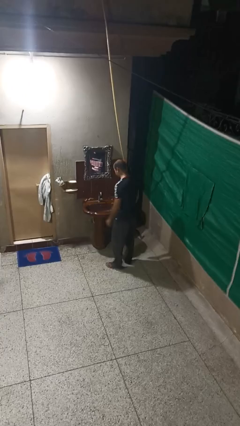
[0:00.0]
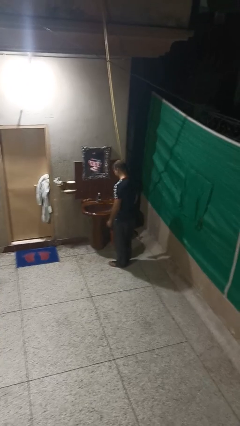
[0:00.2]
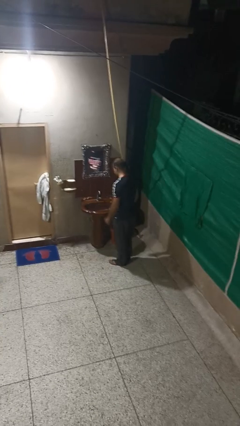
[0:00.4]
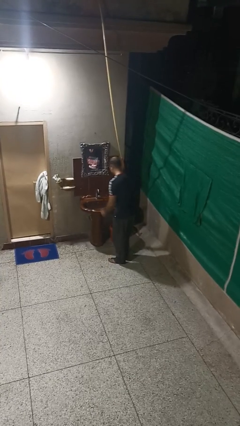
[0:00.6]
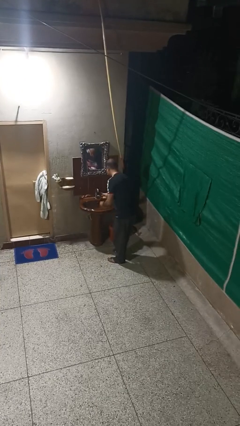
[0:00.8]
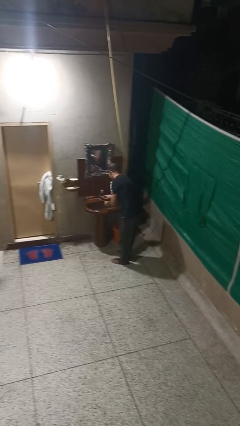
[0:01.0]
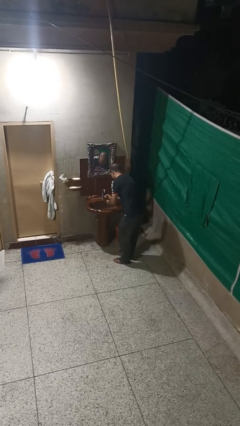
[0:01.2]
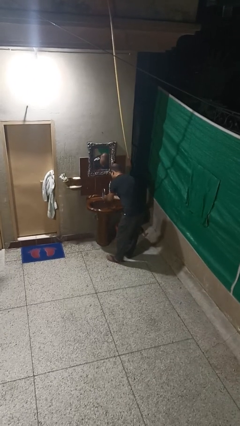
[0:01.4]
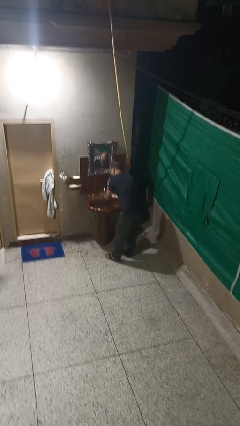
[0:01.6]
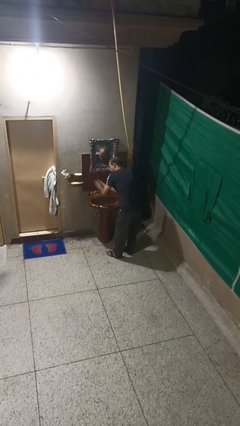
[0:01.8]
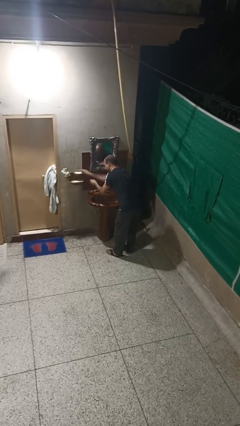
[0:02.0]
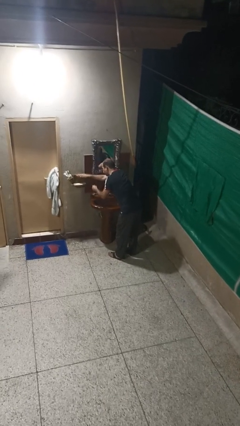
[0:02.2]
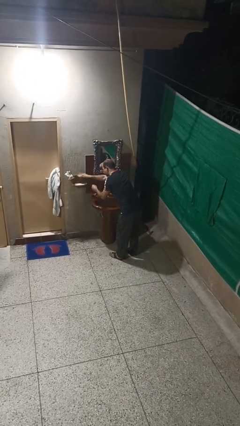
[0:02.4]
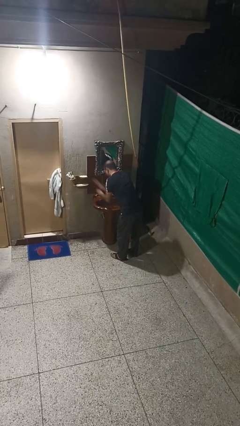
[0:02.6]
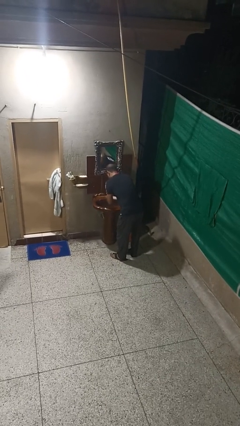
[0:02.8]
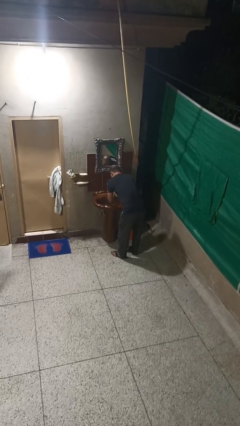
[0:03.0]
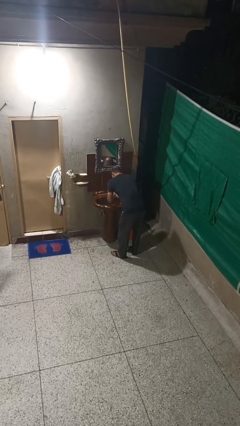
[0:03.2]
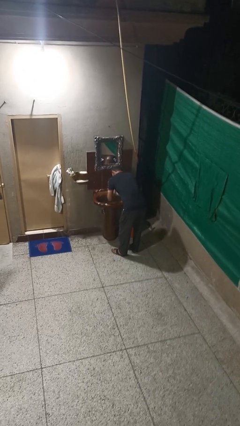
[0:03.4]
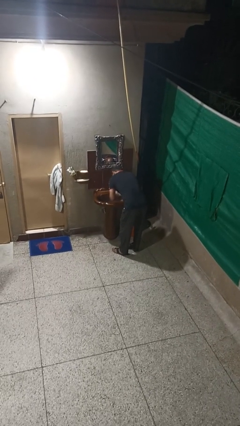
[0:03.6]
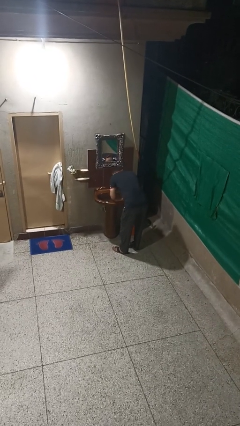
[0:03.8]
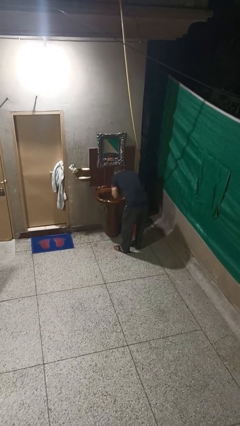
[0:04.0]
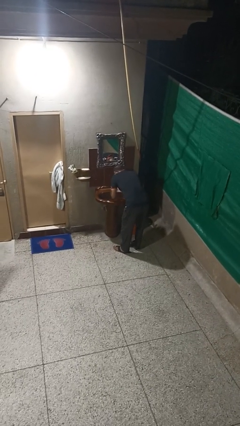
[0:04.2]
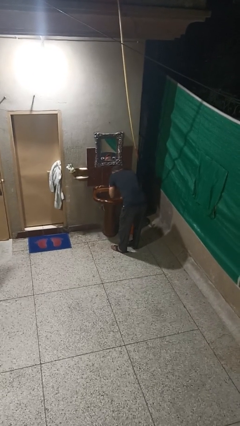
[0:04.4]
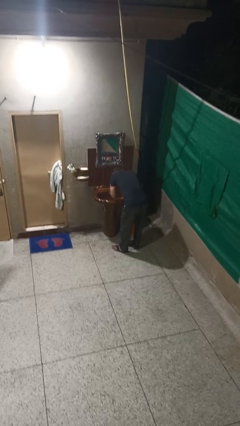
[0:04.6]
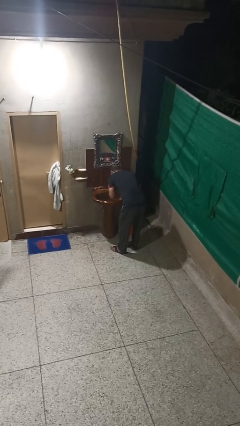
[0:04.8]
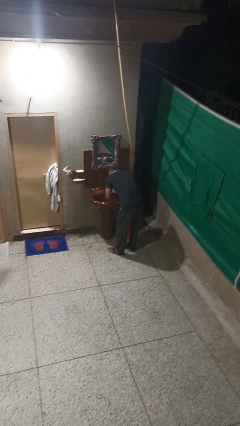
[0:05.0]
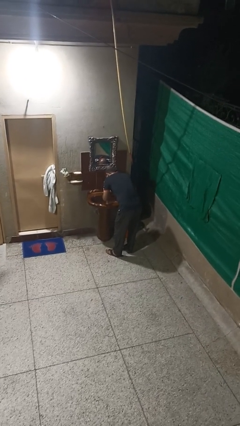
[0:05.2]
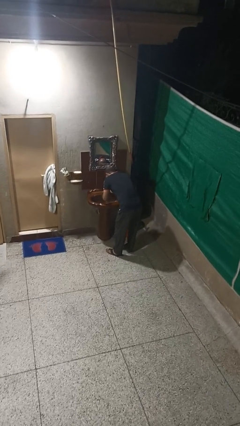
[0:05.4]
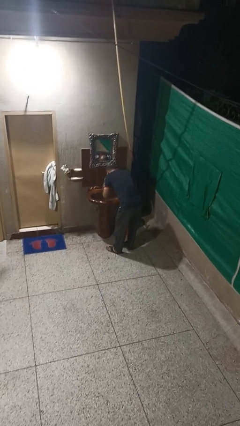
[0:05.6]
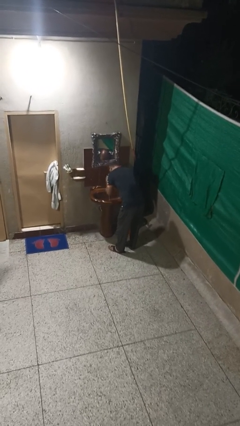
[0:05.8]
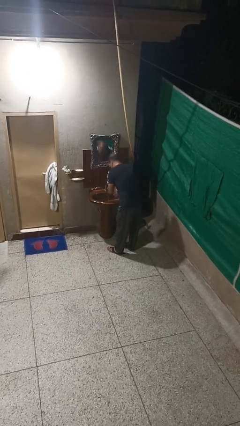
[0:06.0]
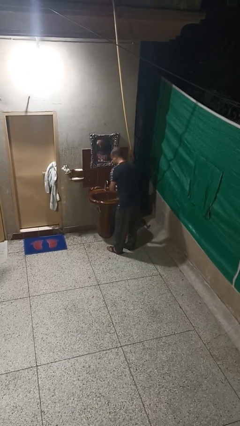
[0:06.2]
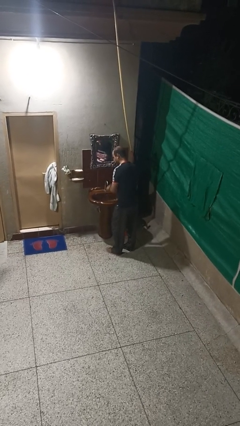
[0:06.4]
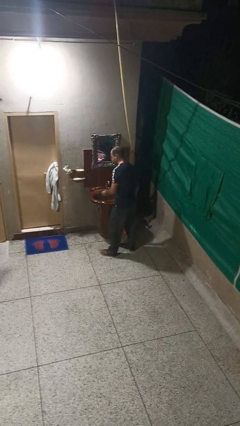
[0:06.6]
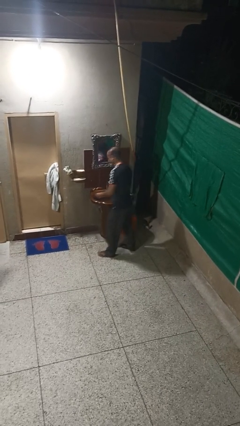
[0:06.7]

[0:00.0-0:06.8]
person washes face

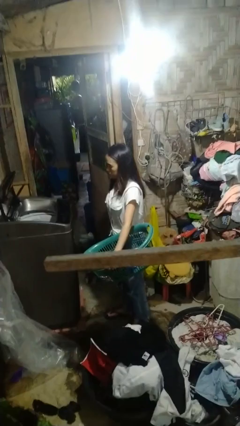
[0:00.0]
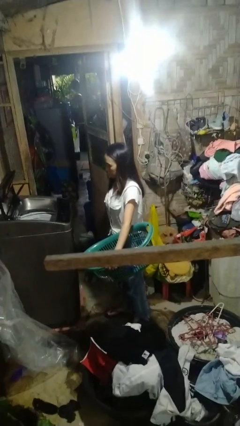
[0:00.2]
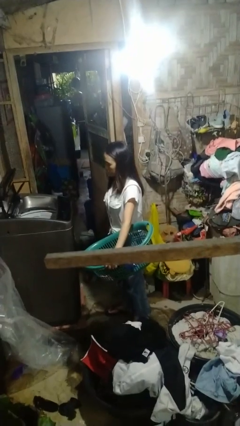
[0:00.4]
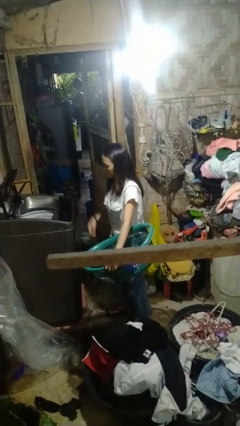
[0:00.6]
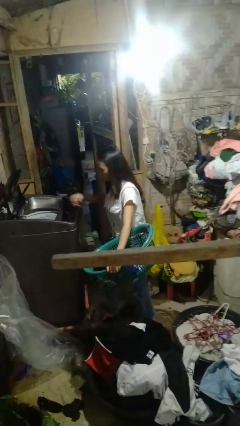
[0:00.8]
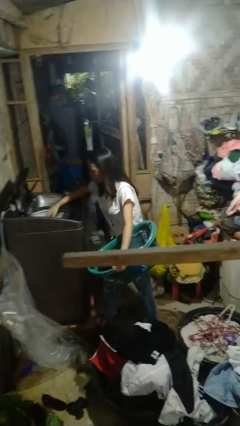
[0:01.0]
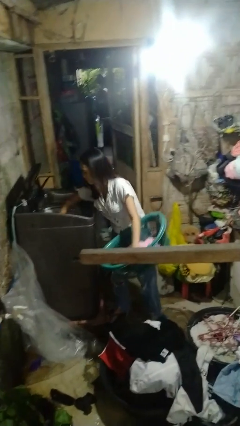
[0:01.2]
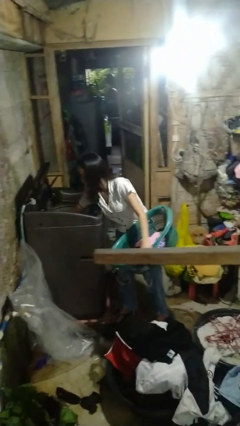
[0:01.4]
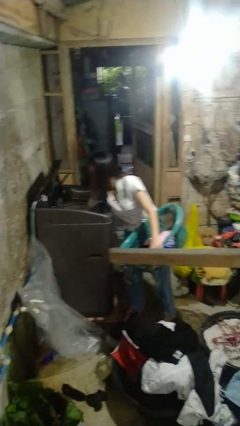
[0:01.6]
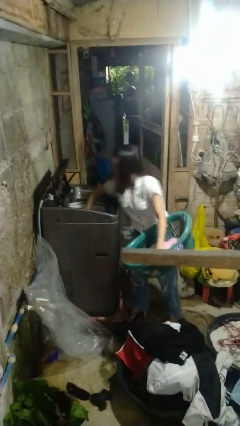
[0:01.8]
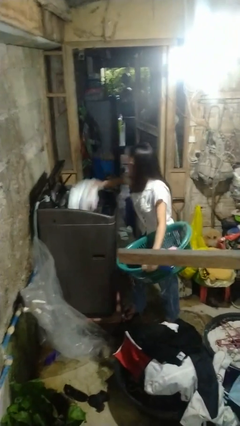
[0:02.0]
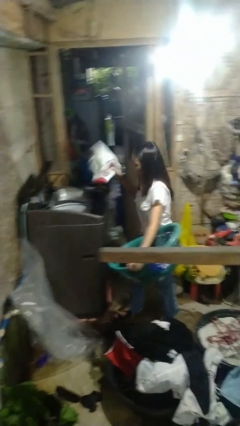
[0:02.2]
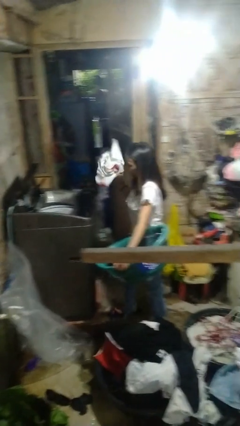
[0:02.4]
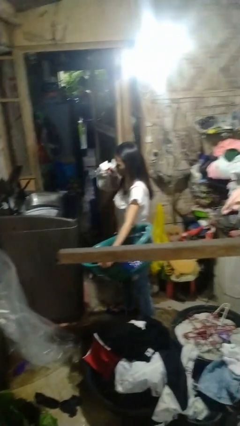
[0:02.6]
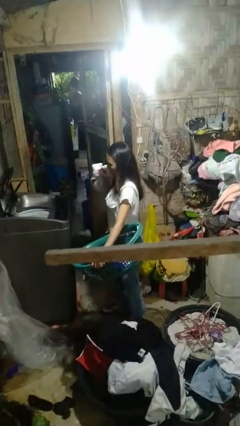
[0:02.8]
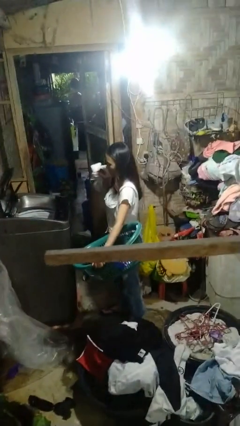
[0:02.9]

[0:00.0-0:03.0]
person unloads dryer

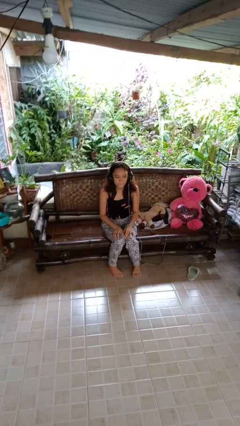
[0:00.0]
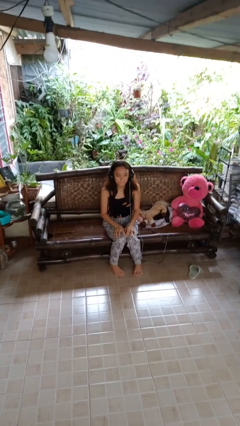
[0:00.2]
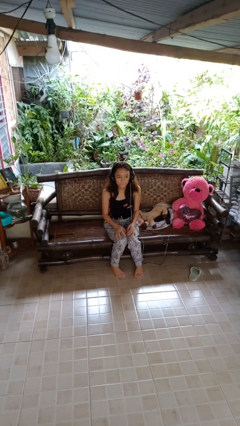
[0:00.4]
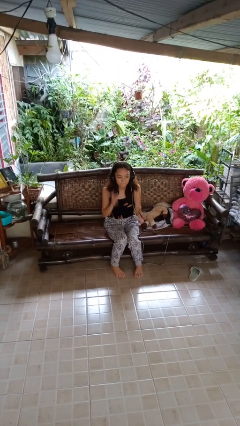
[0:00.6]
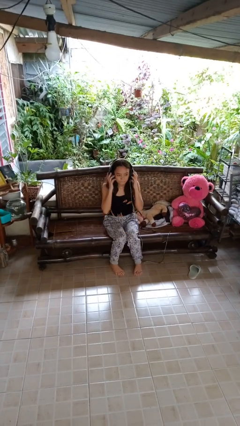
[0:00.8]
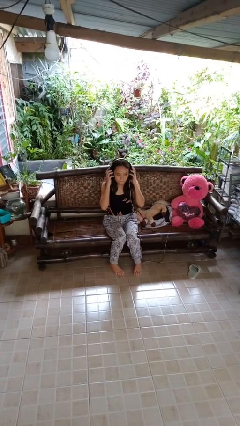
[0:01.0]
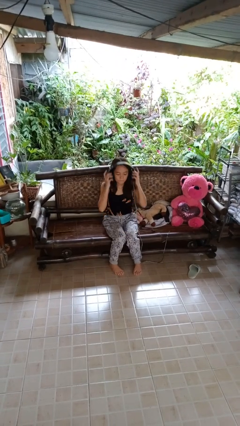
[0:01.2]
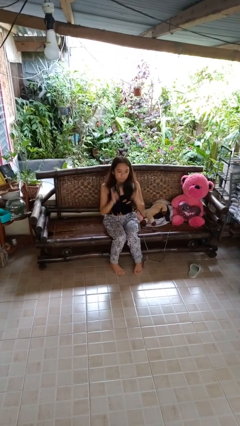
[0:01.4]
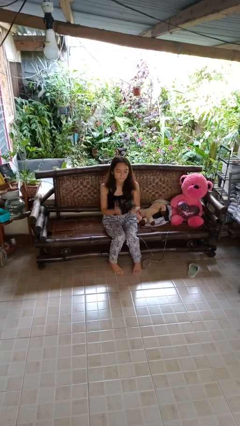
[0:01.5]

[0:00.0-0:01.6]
person takes off headphones

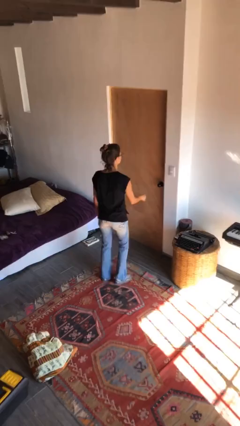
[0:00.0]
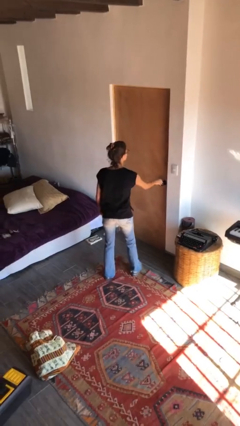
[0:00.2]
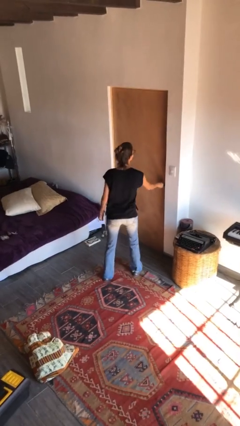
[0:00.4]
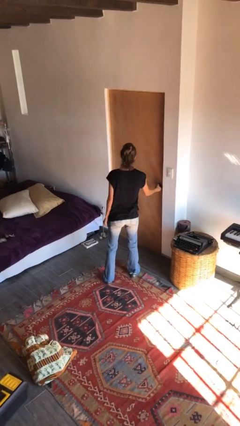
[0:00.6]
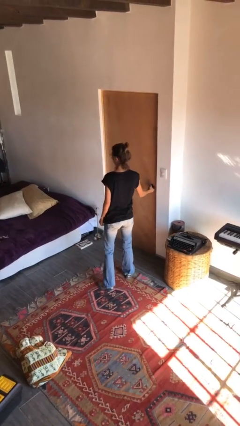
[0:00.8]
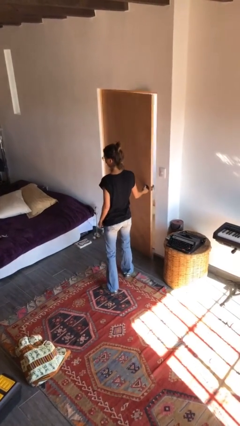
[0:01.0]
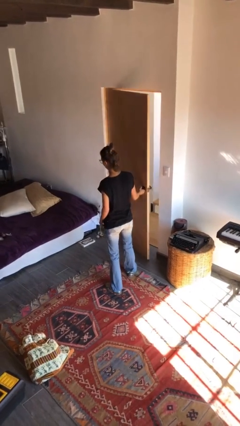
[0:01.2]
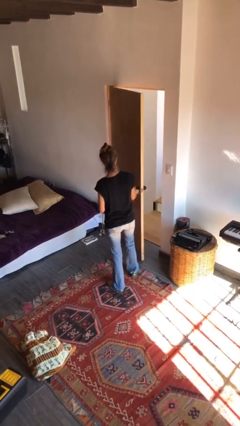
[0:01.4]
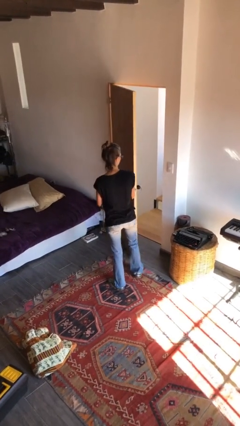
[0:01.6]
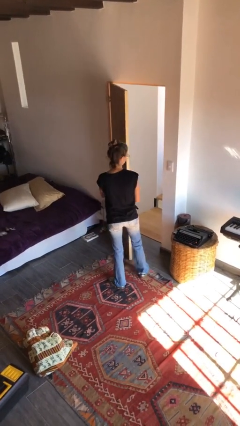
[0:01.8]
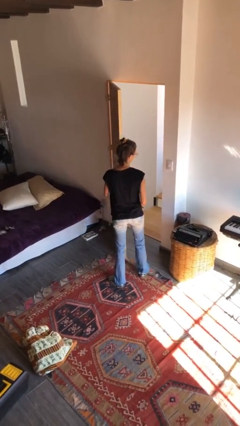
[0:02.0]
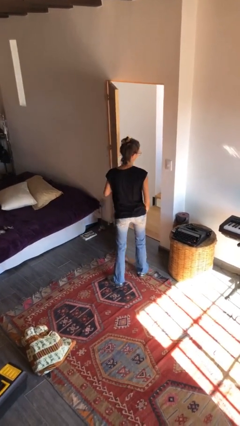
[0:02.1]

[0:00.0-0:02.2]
person opens facility door

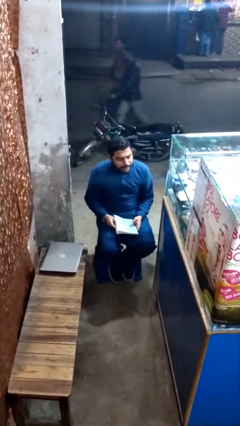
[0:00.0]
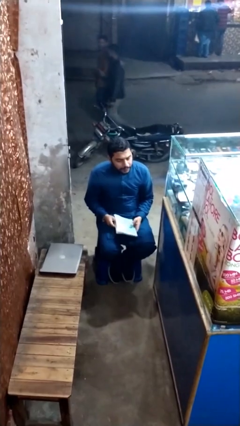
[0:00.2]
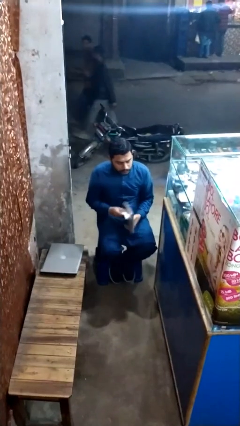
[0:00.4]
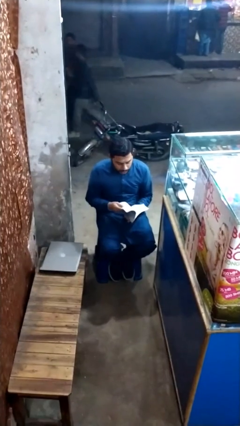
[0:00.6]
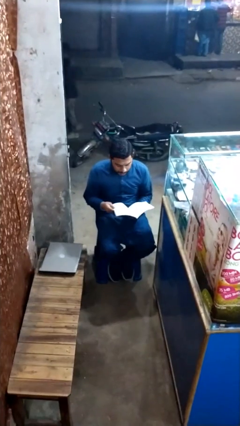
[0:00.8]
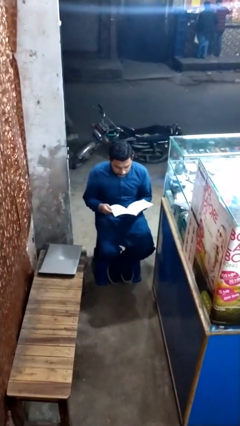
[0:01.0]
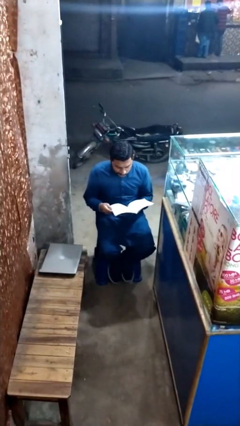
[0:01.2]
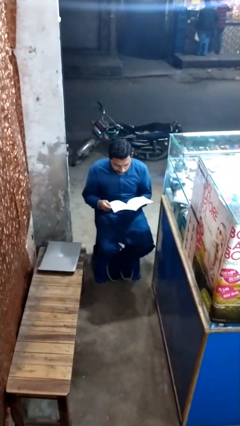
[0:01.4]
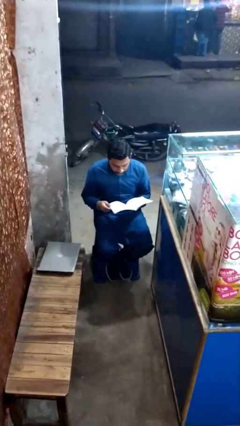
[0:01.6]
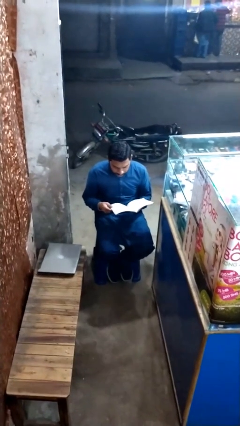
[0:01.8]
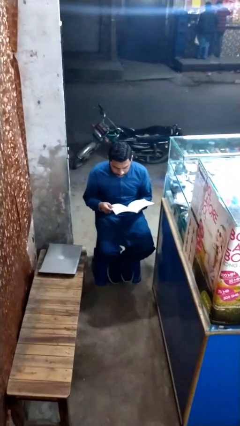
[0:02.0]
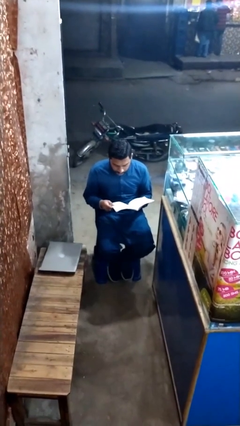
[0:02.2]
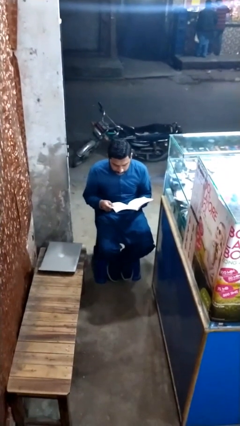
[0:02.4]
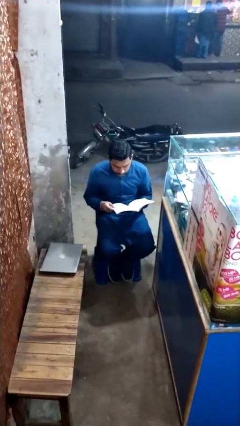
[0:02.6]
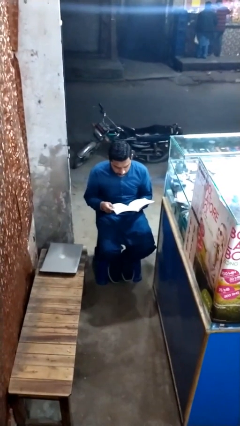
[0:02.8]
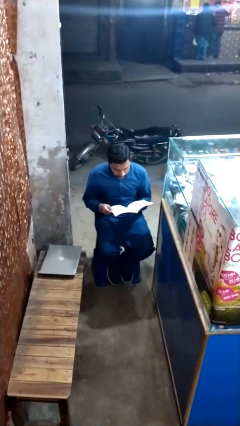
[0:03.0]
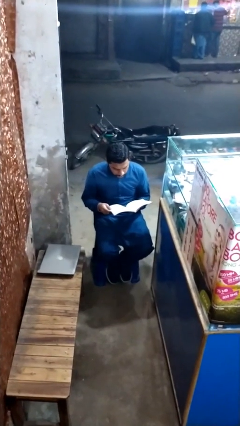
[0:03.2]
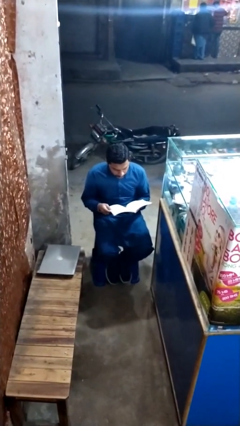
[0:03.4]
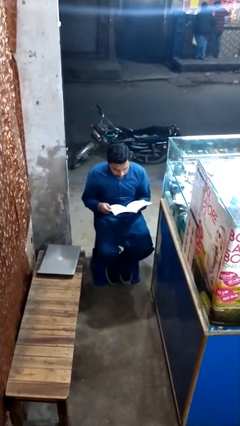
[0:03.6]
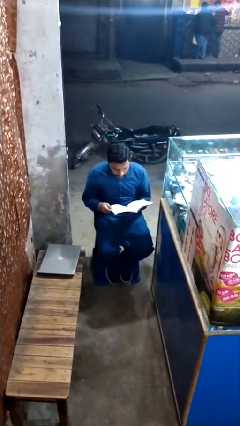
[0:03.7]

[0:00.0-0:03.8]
person reads document
